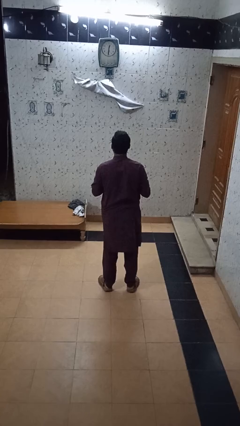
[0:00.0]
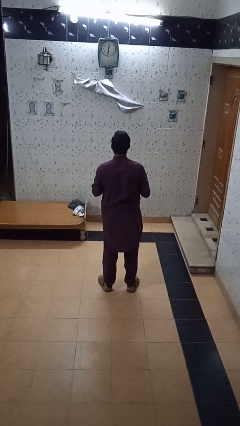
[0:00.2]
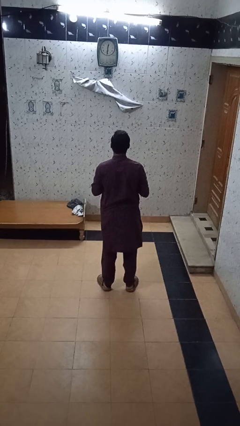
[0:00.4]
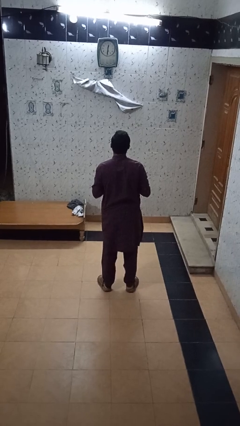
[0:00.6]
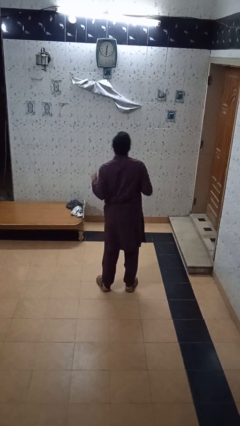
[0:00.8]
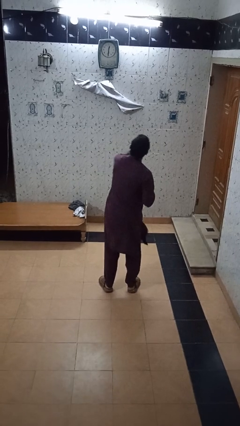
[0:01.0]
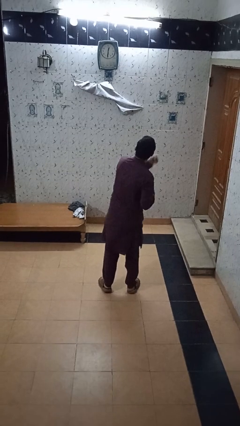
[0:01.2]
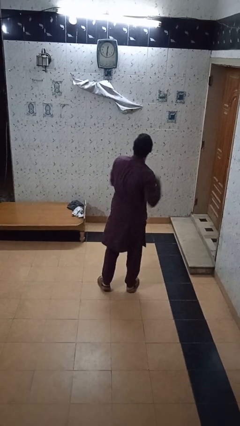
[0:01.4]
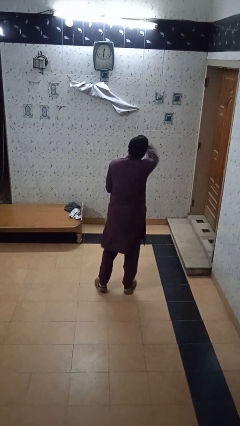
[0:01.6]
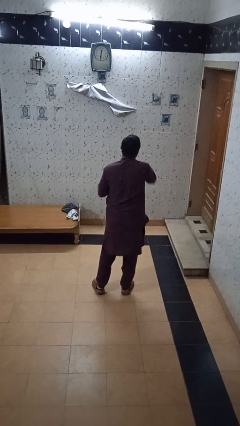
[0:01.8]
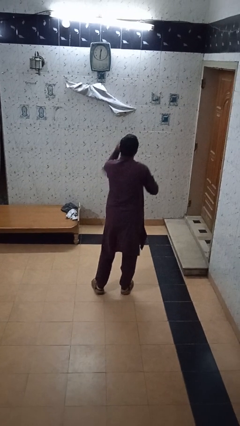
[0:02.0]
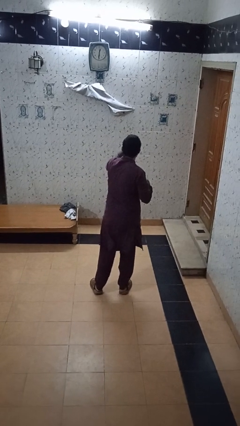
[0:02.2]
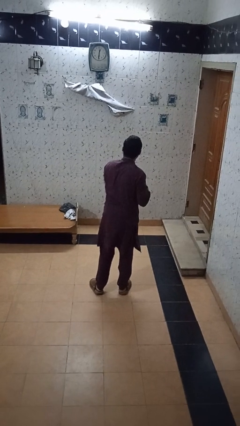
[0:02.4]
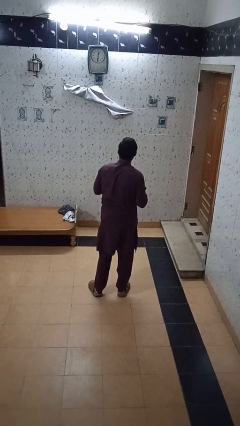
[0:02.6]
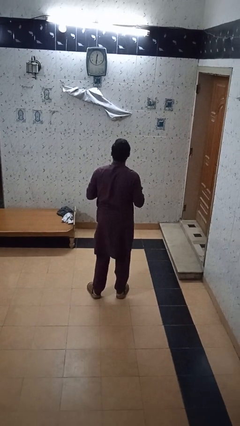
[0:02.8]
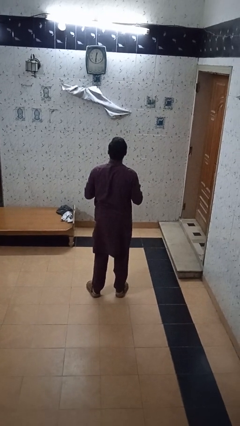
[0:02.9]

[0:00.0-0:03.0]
person punches

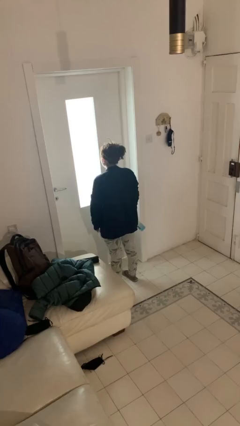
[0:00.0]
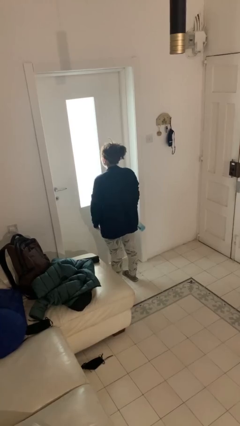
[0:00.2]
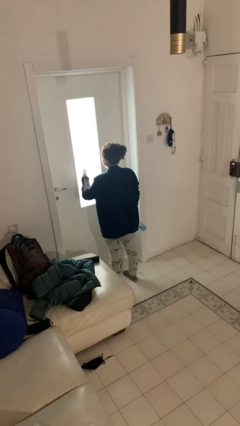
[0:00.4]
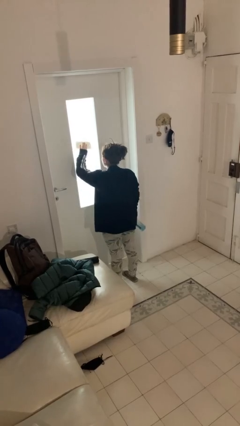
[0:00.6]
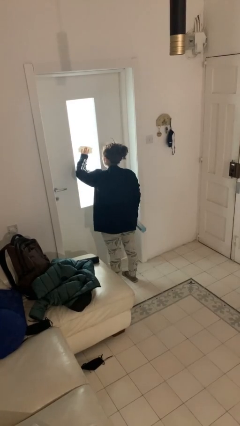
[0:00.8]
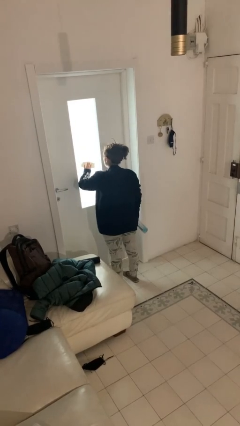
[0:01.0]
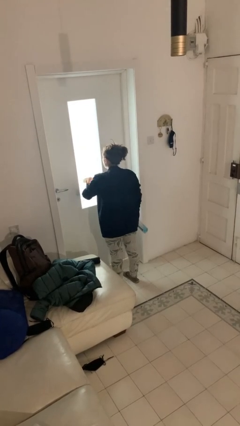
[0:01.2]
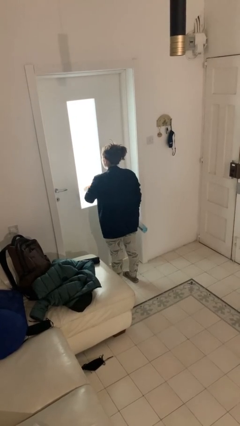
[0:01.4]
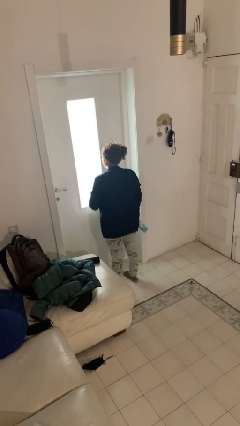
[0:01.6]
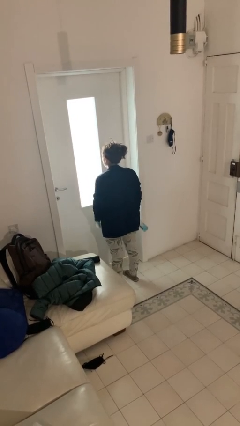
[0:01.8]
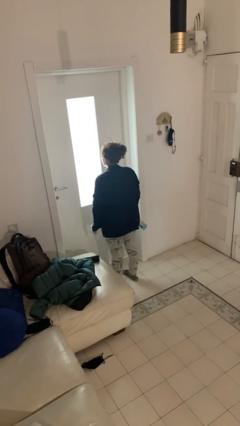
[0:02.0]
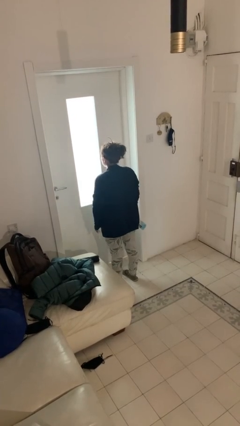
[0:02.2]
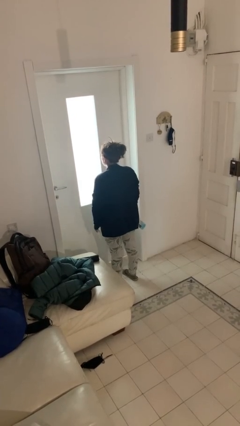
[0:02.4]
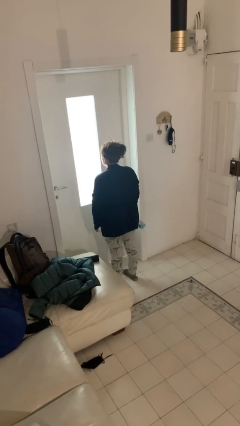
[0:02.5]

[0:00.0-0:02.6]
person washes window

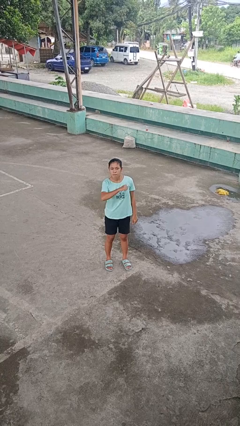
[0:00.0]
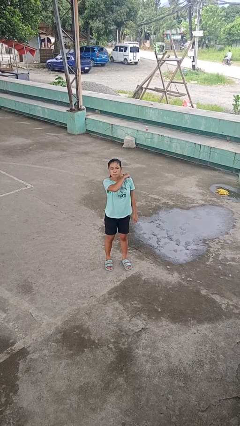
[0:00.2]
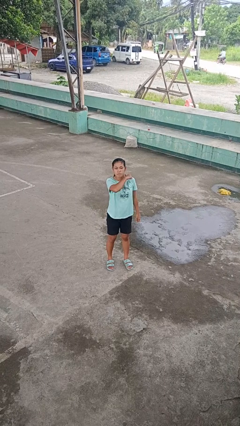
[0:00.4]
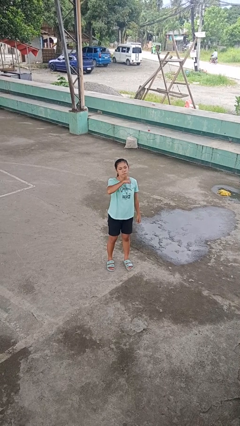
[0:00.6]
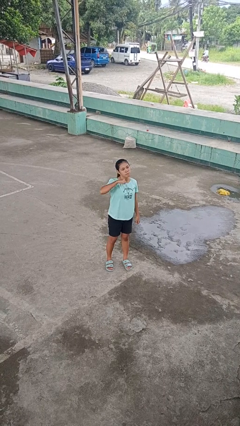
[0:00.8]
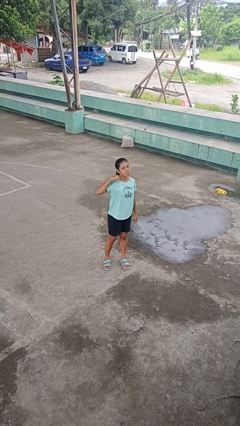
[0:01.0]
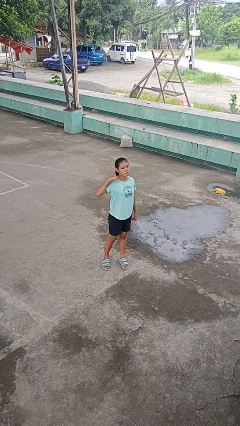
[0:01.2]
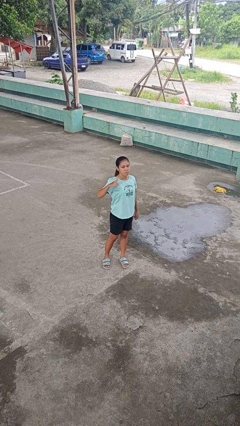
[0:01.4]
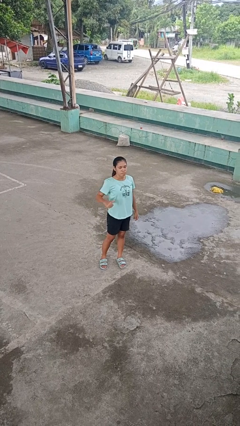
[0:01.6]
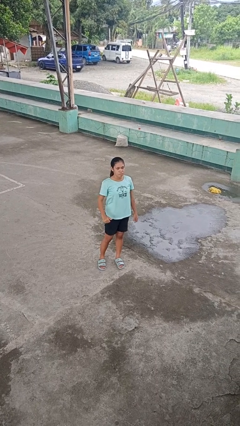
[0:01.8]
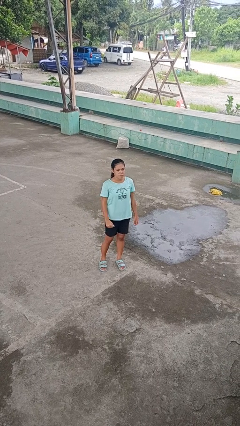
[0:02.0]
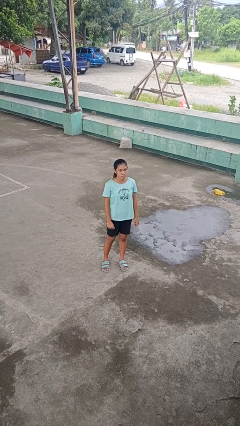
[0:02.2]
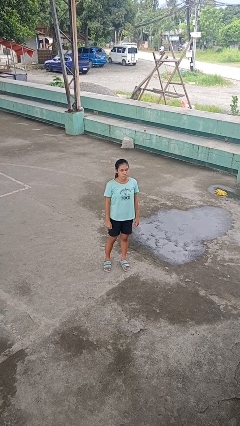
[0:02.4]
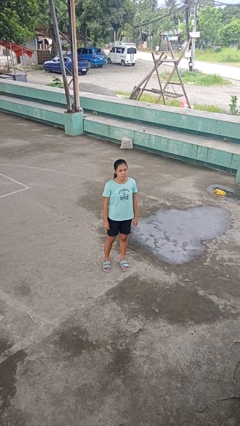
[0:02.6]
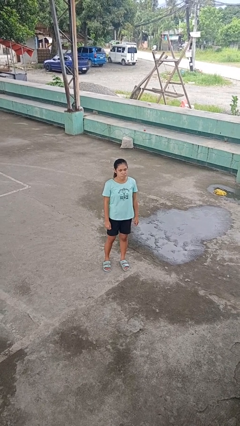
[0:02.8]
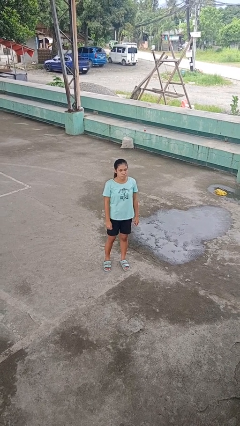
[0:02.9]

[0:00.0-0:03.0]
person gestures cut

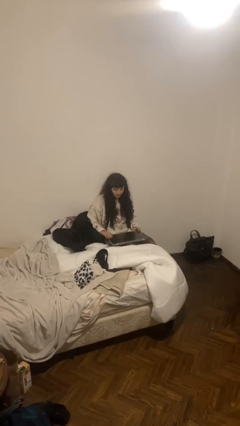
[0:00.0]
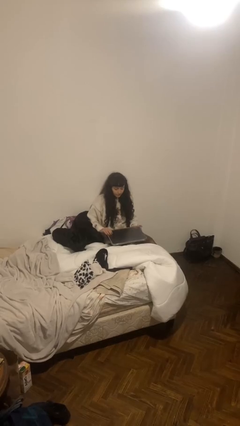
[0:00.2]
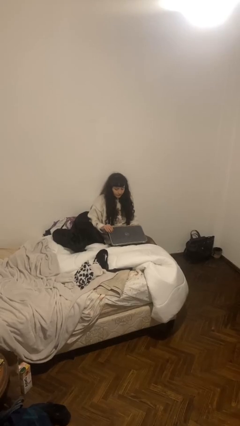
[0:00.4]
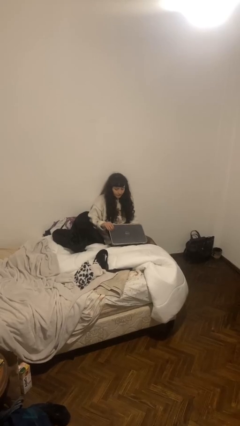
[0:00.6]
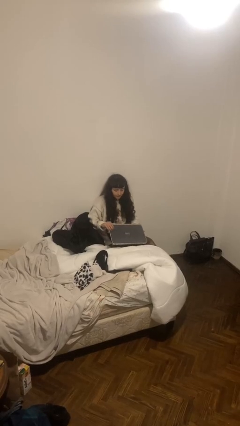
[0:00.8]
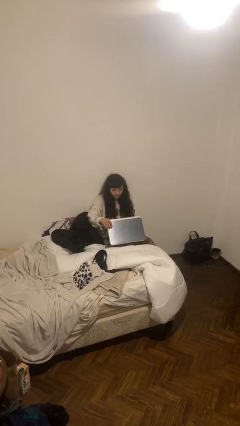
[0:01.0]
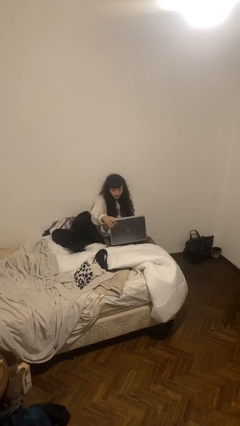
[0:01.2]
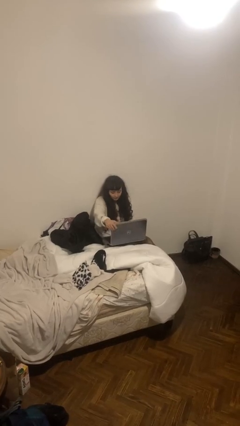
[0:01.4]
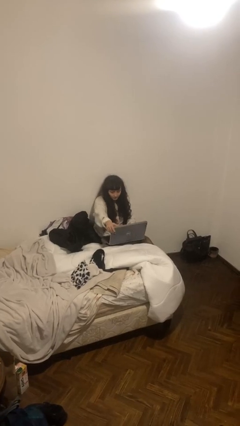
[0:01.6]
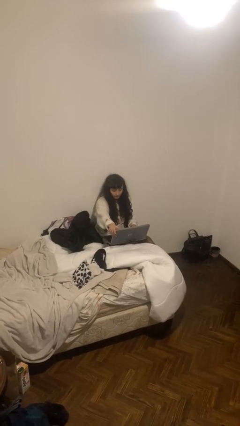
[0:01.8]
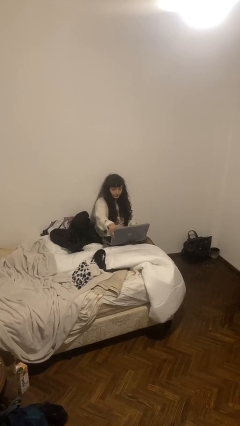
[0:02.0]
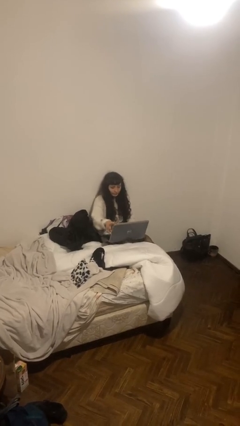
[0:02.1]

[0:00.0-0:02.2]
person opens laptop

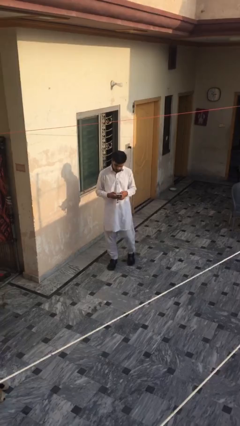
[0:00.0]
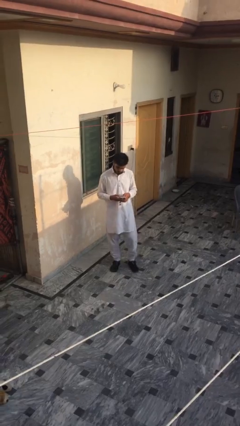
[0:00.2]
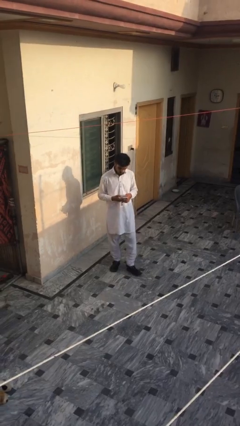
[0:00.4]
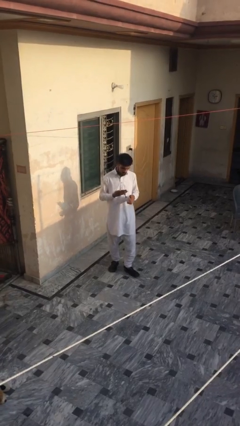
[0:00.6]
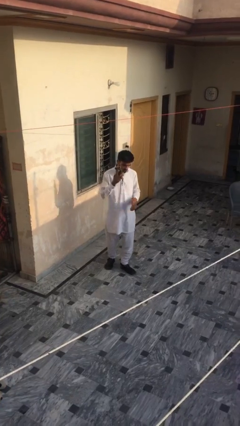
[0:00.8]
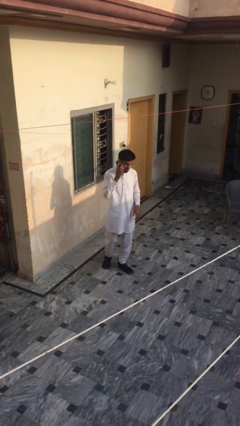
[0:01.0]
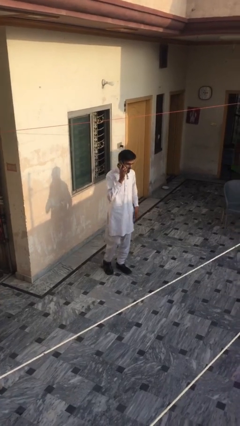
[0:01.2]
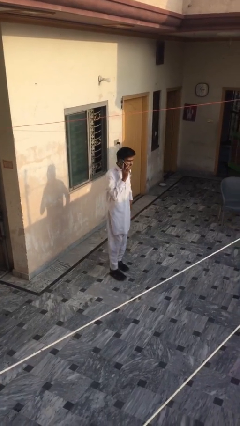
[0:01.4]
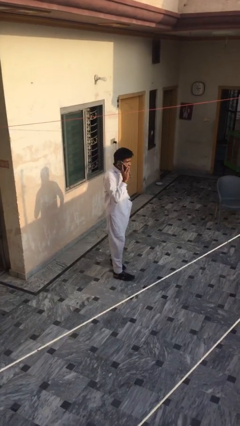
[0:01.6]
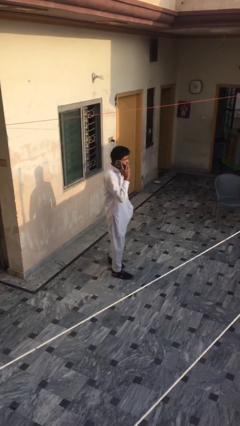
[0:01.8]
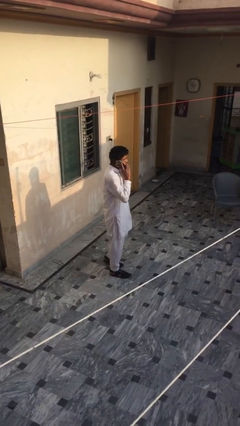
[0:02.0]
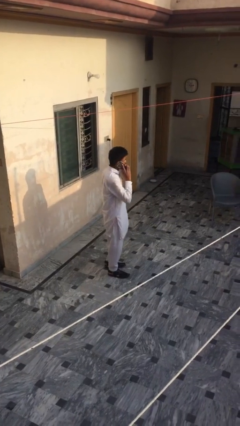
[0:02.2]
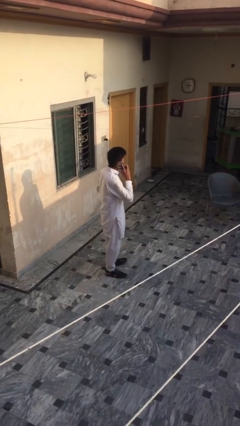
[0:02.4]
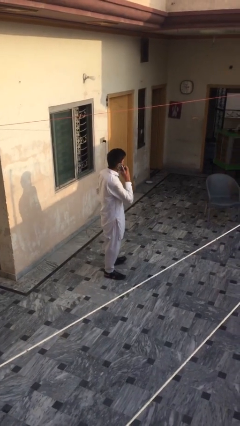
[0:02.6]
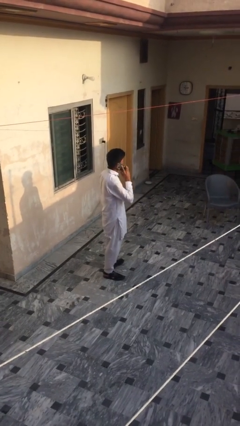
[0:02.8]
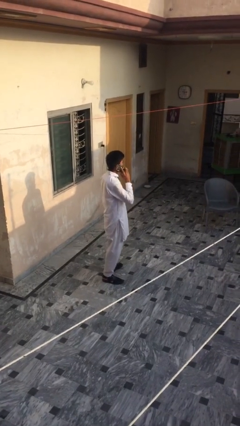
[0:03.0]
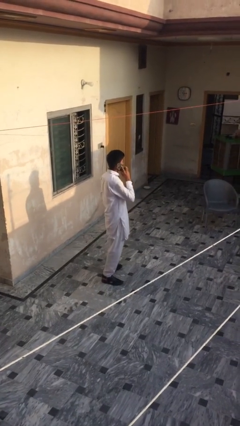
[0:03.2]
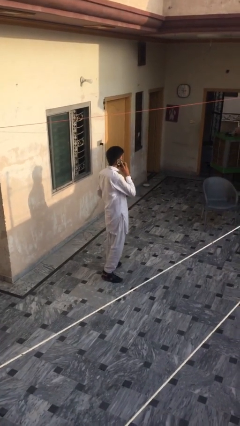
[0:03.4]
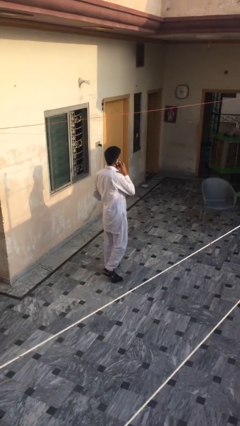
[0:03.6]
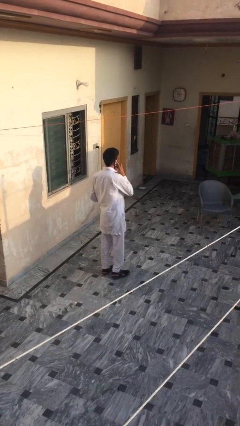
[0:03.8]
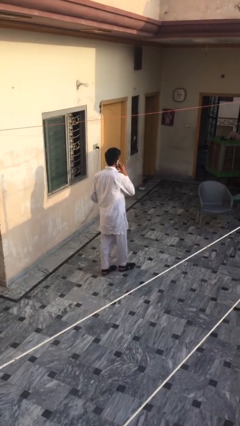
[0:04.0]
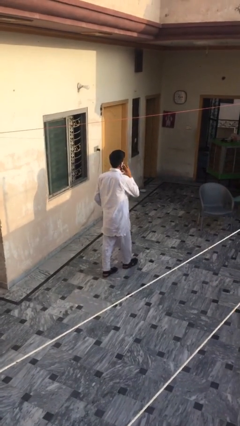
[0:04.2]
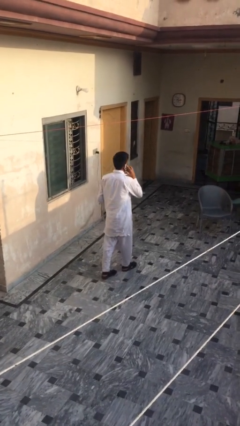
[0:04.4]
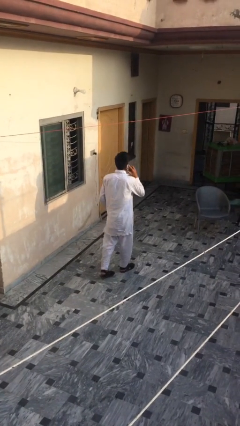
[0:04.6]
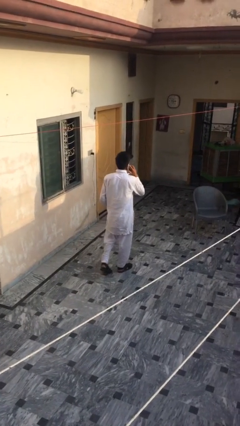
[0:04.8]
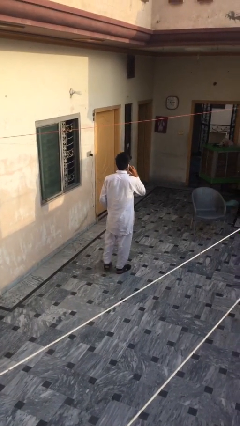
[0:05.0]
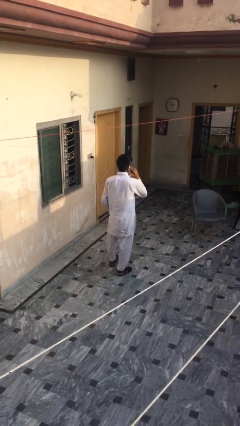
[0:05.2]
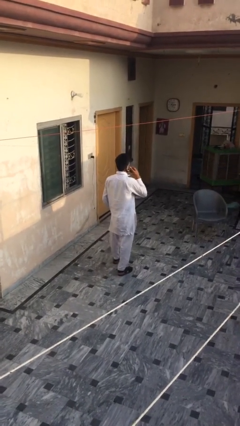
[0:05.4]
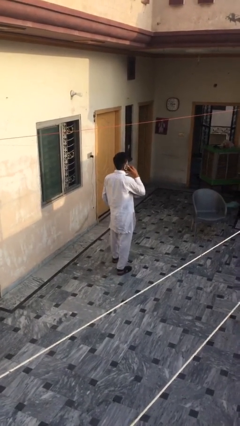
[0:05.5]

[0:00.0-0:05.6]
person talks on phone

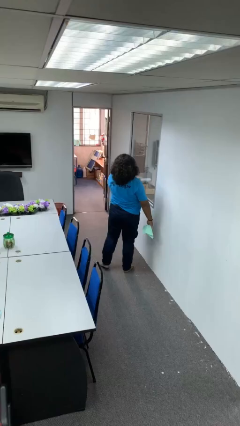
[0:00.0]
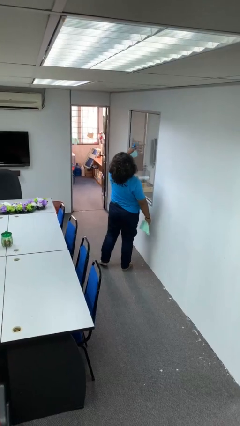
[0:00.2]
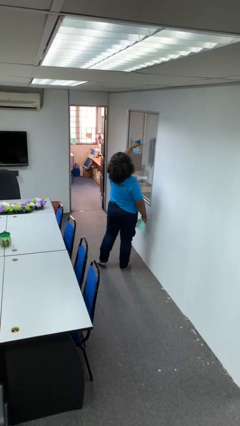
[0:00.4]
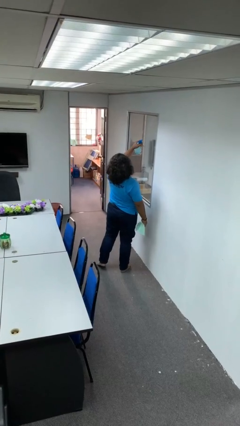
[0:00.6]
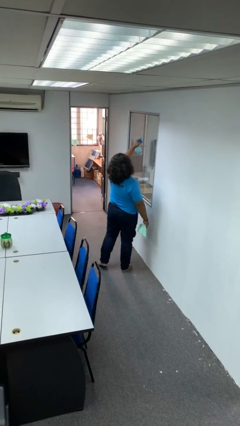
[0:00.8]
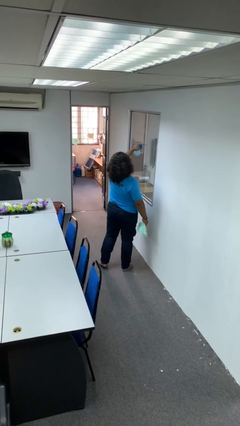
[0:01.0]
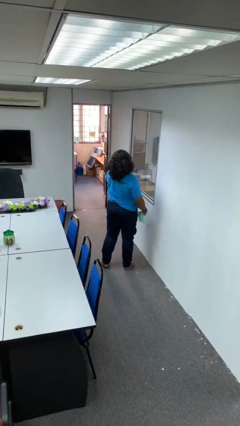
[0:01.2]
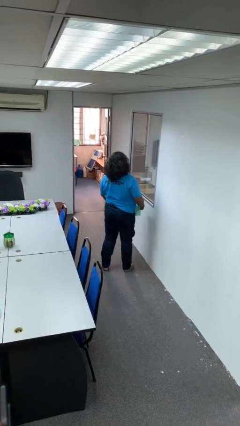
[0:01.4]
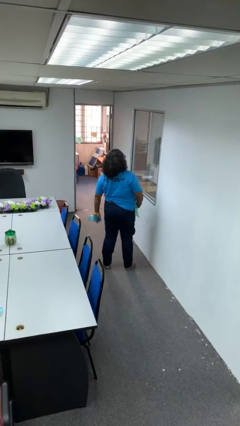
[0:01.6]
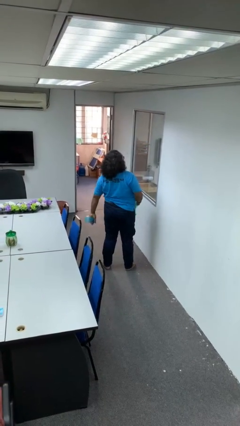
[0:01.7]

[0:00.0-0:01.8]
person sprays from bottle
